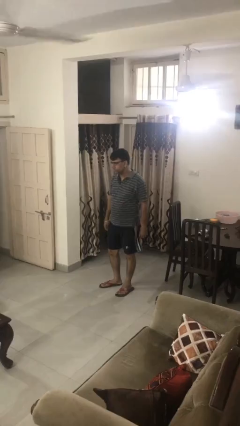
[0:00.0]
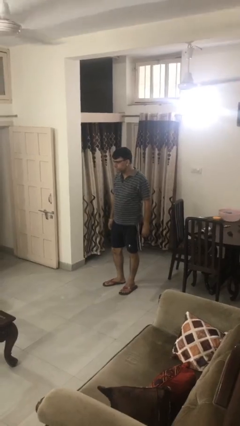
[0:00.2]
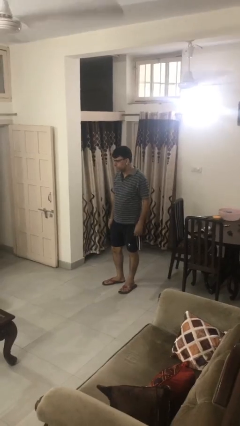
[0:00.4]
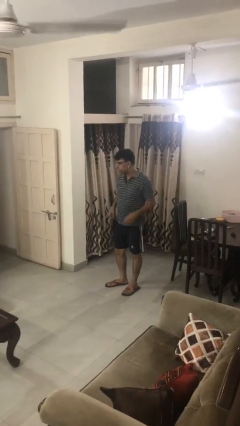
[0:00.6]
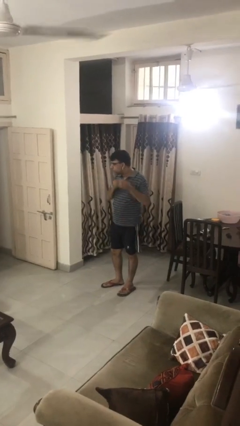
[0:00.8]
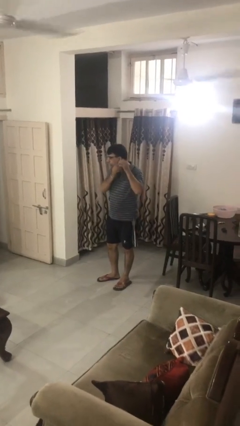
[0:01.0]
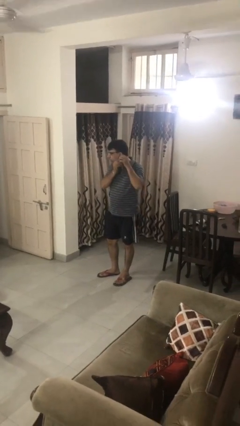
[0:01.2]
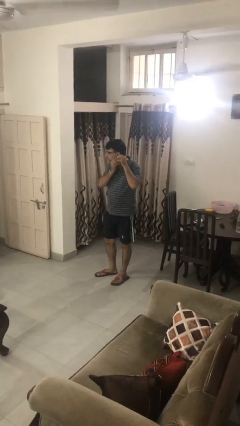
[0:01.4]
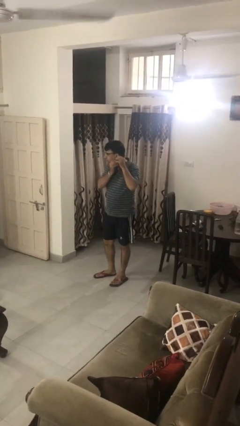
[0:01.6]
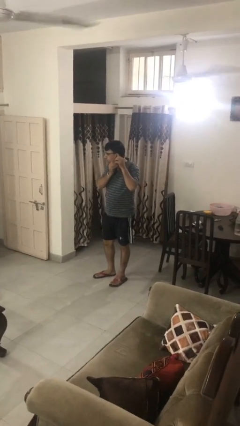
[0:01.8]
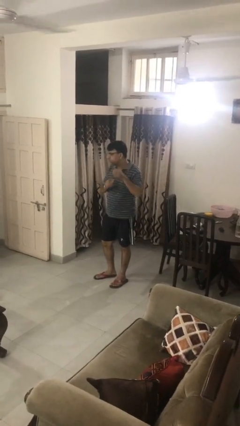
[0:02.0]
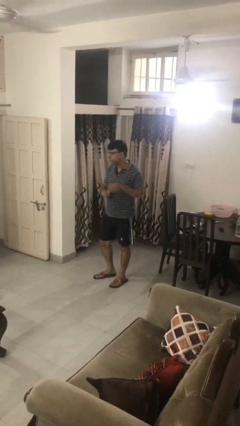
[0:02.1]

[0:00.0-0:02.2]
person takes off earrings

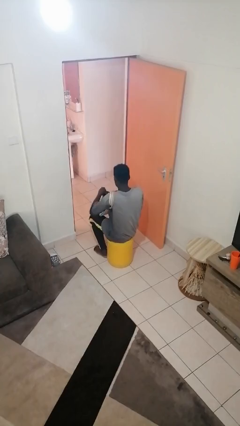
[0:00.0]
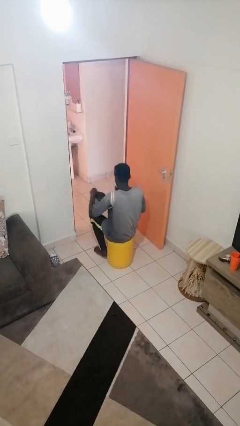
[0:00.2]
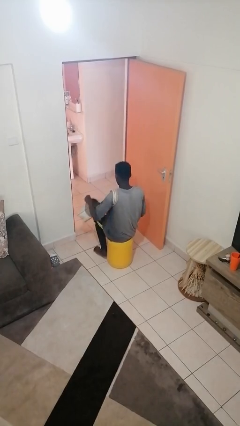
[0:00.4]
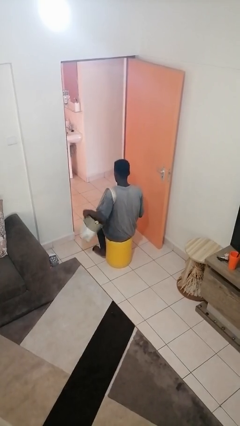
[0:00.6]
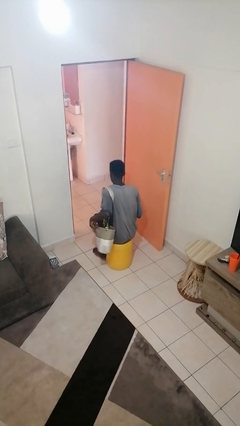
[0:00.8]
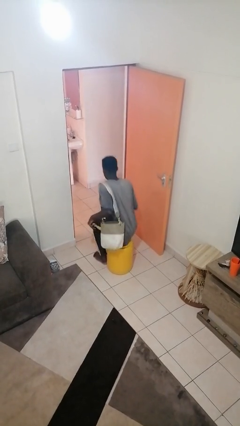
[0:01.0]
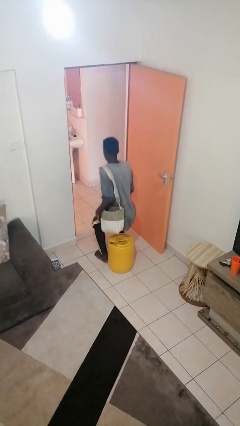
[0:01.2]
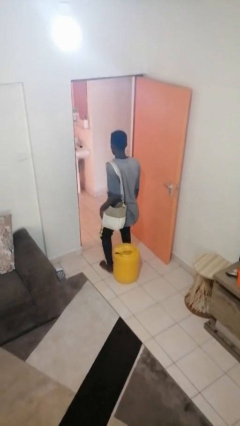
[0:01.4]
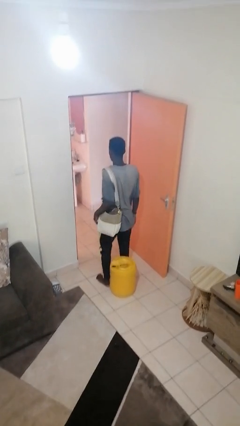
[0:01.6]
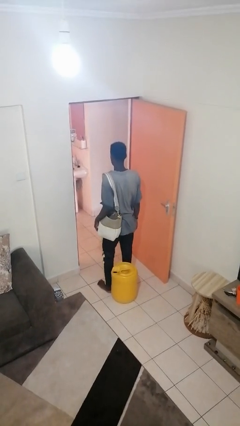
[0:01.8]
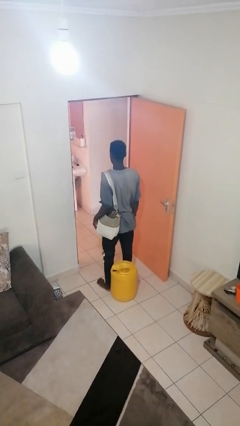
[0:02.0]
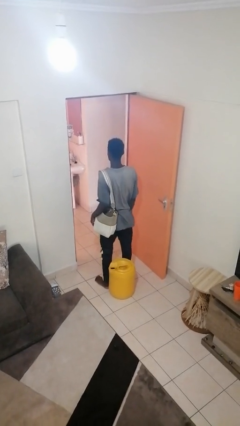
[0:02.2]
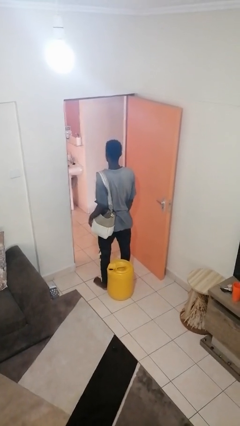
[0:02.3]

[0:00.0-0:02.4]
person puts object into purse

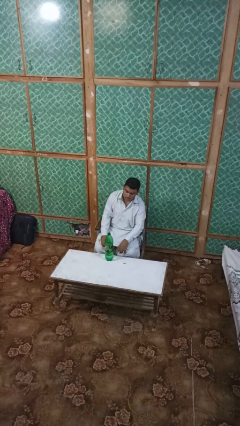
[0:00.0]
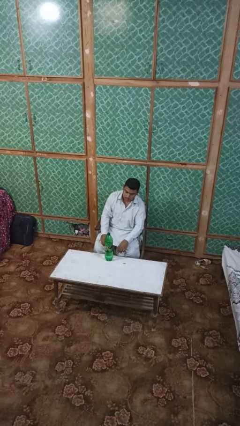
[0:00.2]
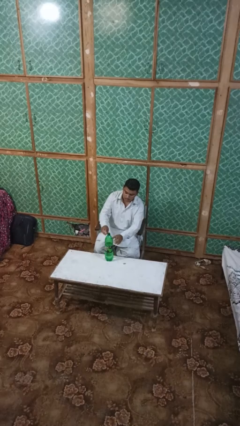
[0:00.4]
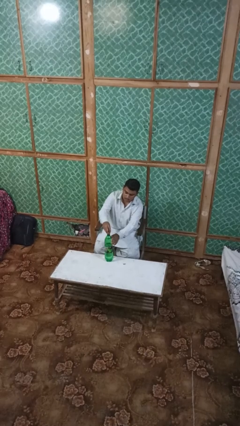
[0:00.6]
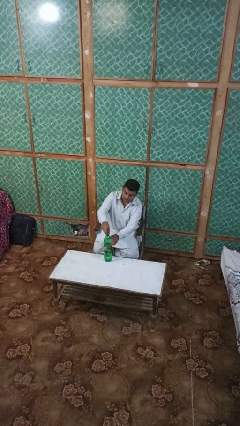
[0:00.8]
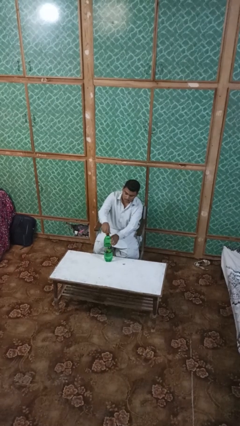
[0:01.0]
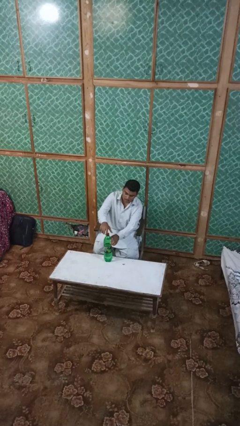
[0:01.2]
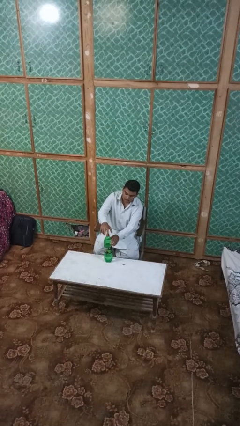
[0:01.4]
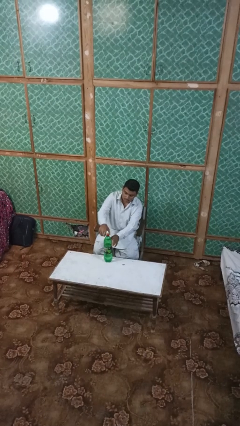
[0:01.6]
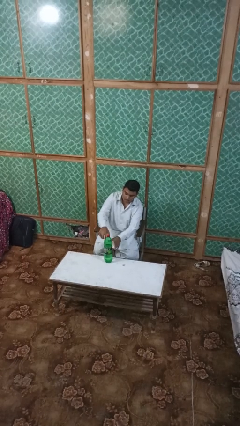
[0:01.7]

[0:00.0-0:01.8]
person screws lid to bottle

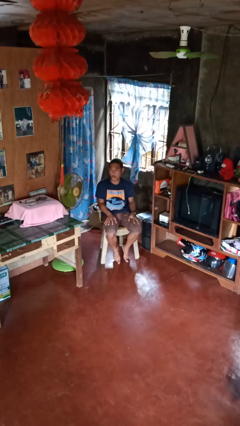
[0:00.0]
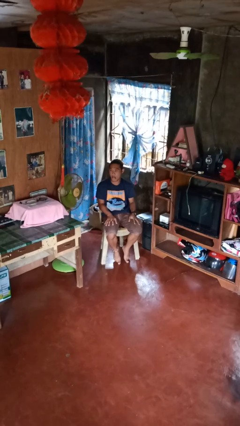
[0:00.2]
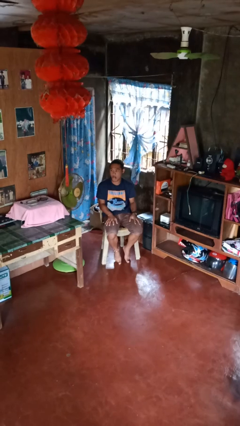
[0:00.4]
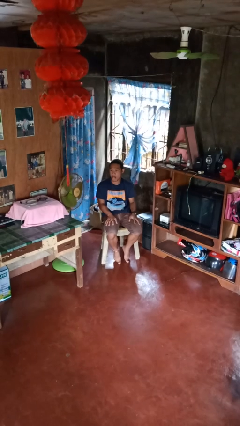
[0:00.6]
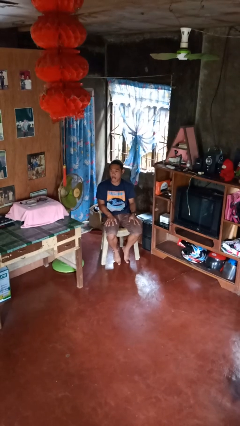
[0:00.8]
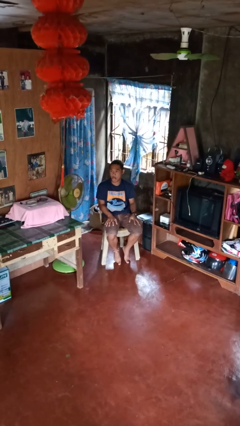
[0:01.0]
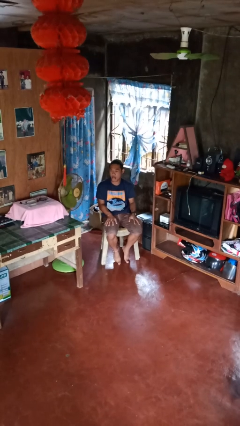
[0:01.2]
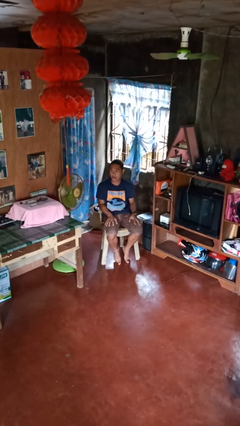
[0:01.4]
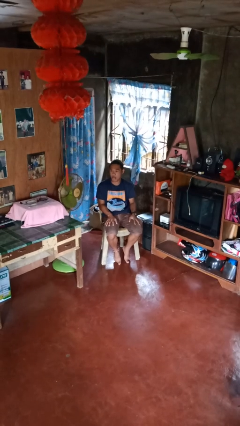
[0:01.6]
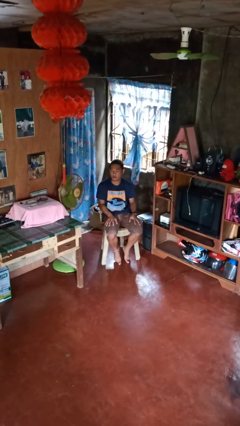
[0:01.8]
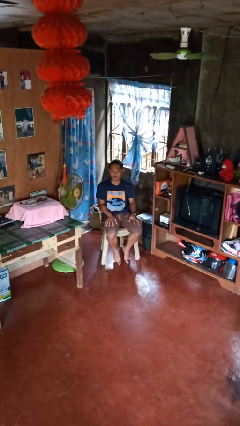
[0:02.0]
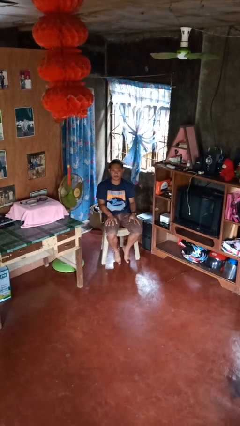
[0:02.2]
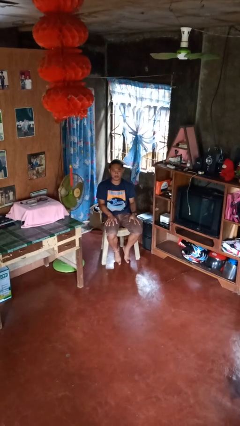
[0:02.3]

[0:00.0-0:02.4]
person sticks out tongue

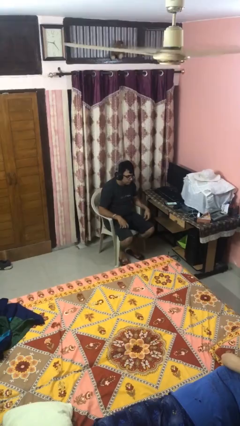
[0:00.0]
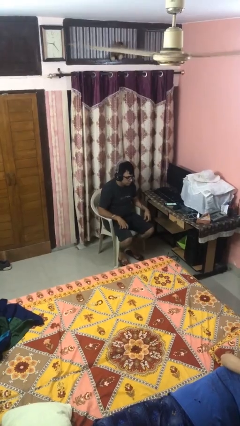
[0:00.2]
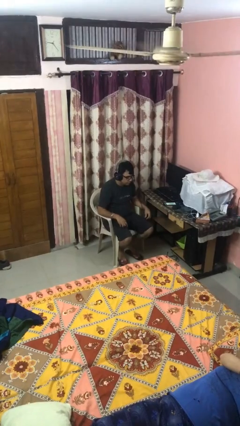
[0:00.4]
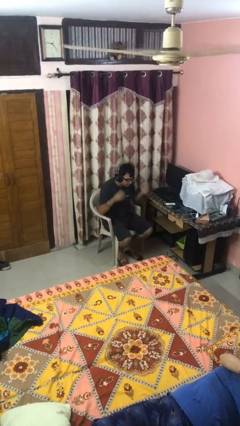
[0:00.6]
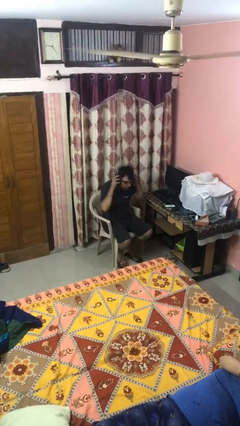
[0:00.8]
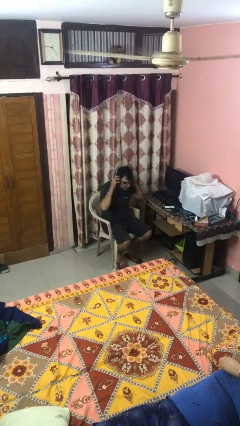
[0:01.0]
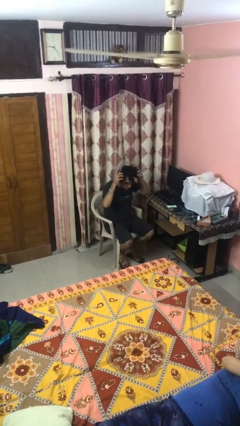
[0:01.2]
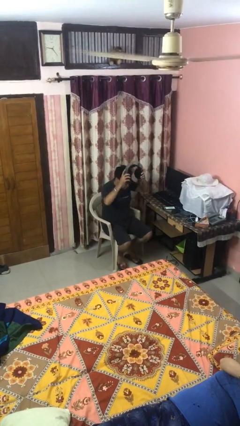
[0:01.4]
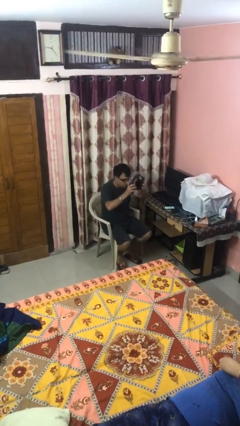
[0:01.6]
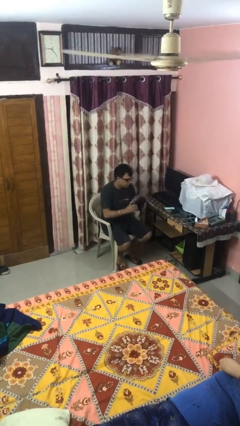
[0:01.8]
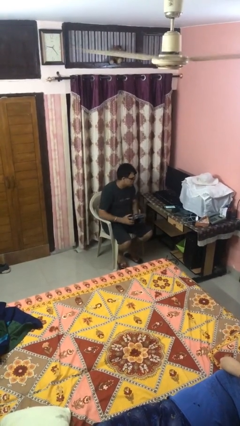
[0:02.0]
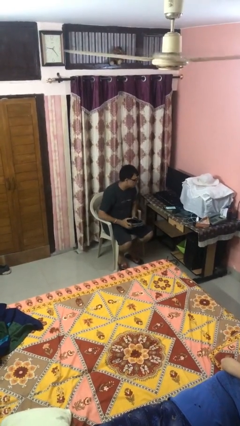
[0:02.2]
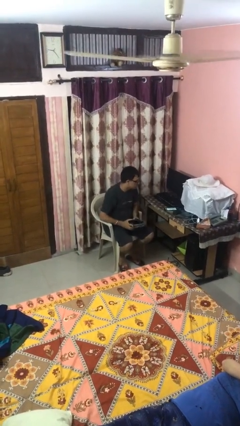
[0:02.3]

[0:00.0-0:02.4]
person takes off headphones

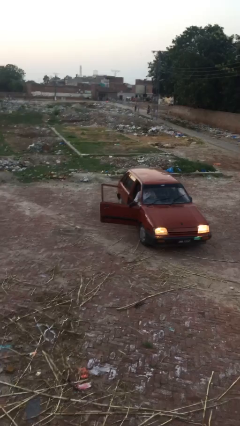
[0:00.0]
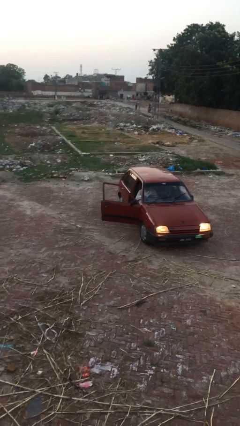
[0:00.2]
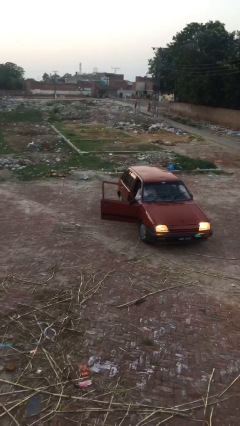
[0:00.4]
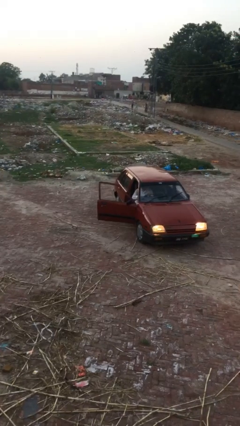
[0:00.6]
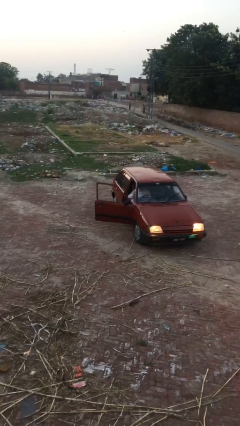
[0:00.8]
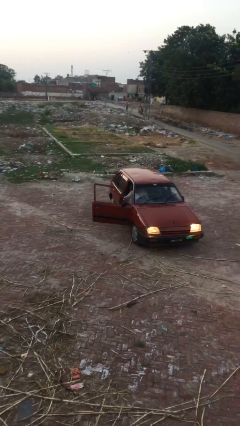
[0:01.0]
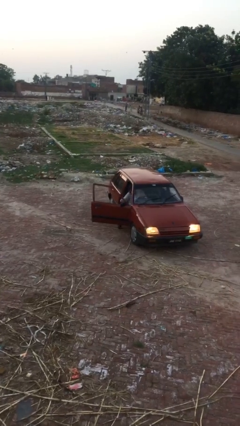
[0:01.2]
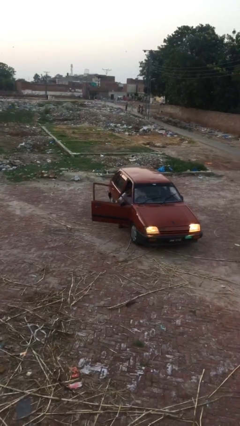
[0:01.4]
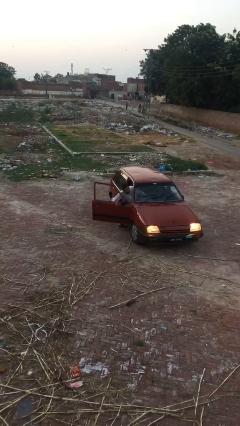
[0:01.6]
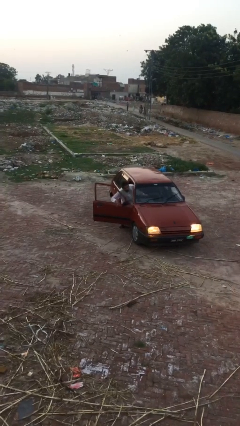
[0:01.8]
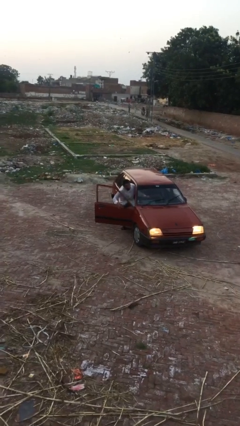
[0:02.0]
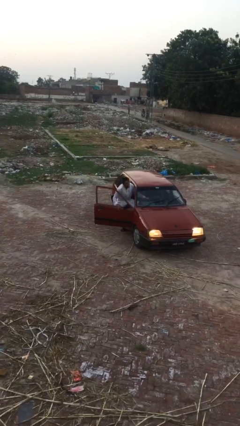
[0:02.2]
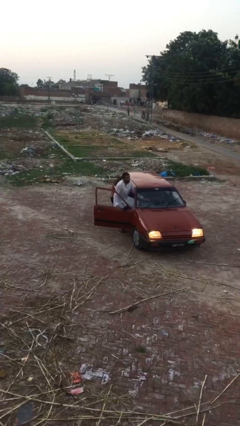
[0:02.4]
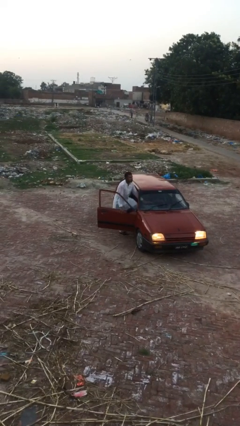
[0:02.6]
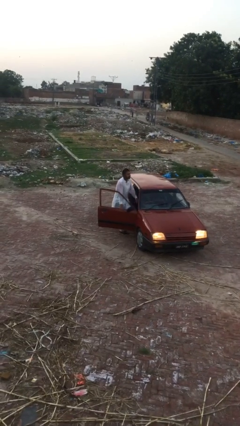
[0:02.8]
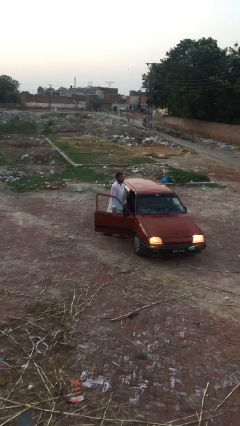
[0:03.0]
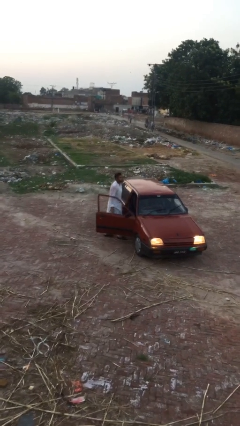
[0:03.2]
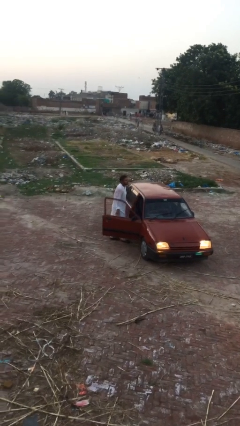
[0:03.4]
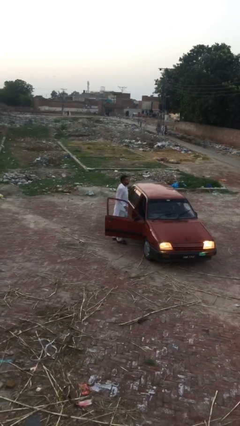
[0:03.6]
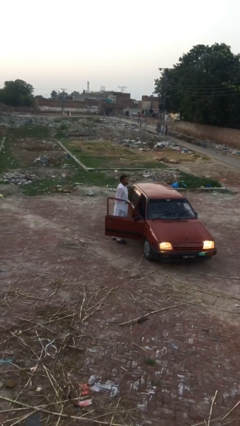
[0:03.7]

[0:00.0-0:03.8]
person exits car

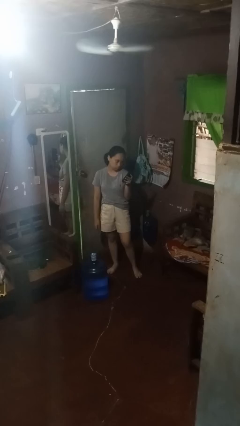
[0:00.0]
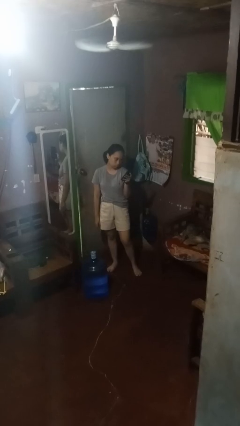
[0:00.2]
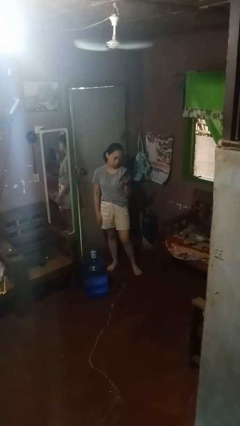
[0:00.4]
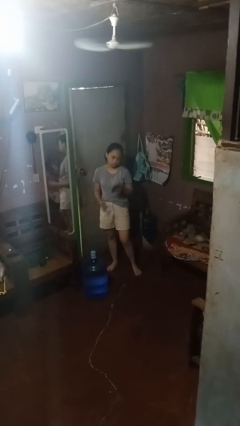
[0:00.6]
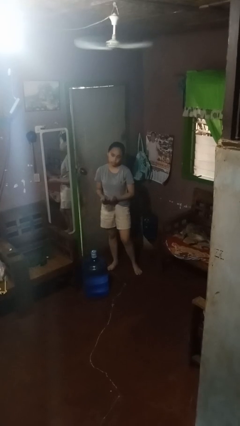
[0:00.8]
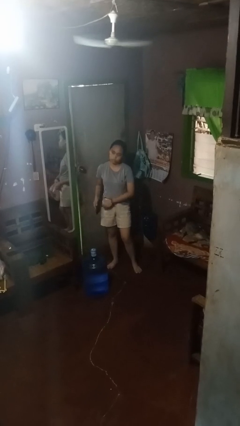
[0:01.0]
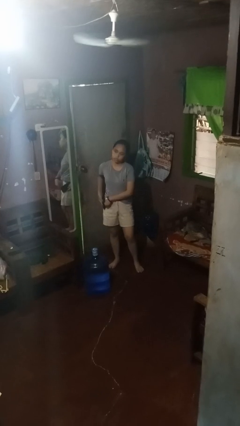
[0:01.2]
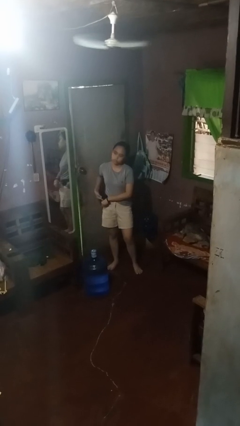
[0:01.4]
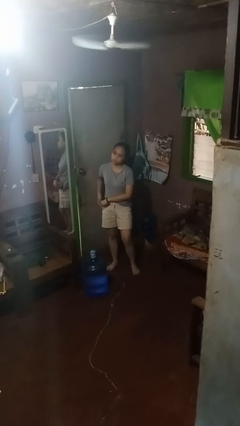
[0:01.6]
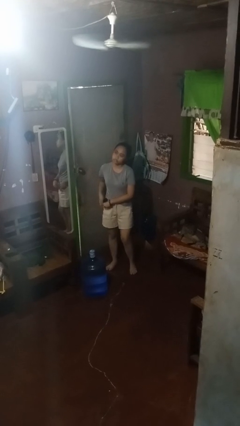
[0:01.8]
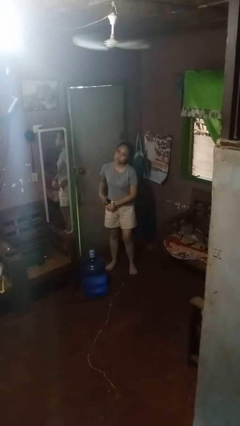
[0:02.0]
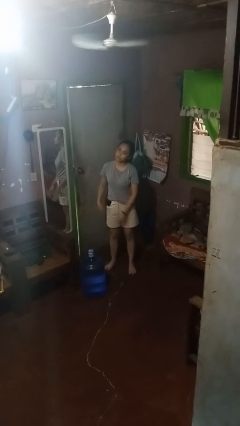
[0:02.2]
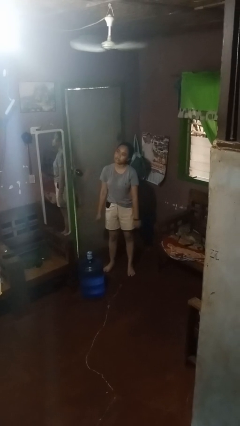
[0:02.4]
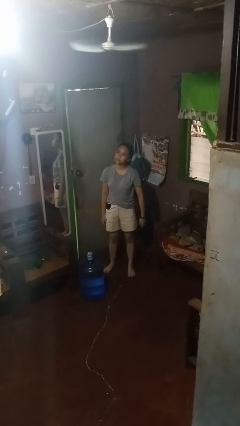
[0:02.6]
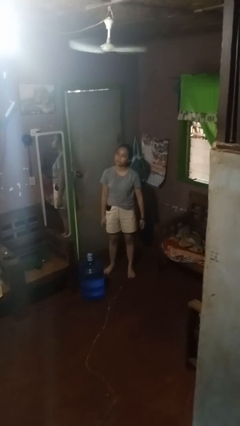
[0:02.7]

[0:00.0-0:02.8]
person puts phone into pocket
